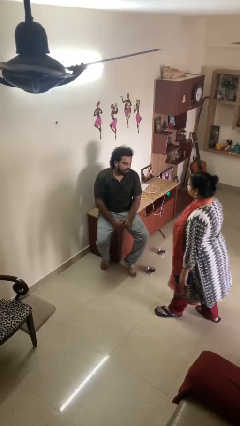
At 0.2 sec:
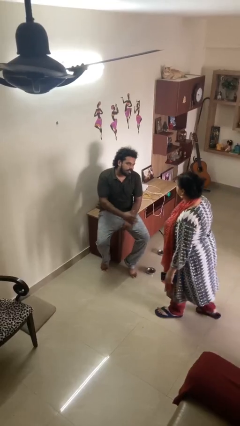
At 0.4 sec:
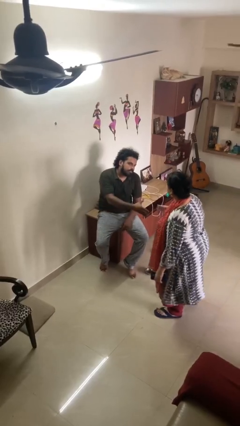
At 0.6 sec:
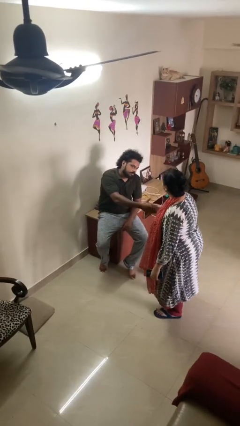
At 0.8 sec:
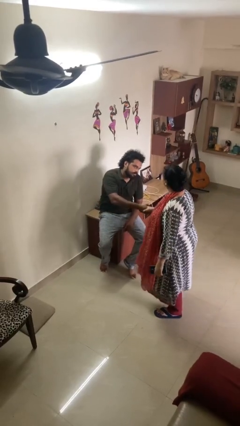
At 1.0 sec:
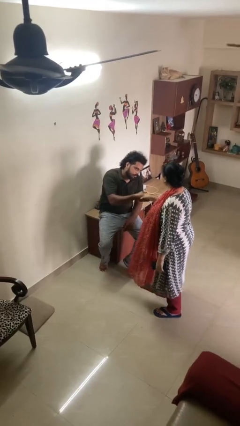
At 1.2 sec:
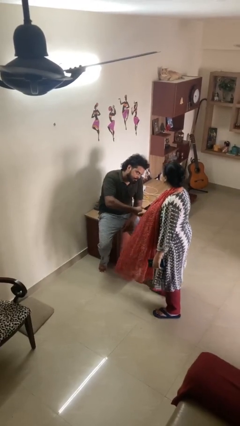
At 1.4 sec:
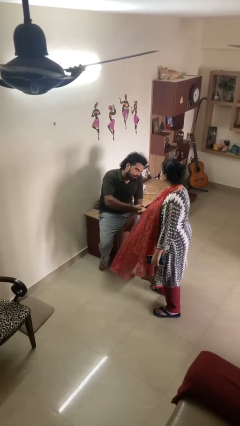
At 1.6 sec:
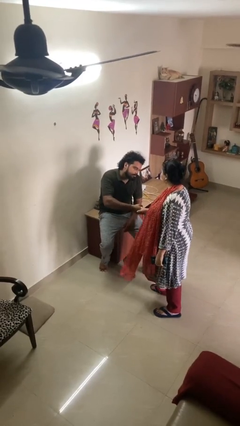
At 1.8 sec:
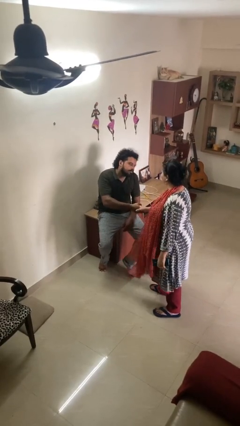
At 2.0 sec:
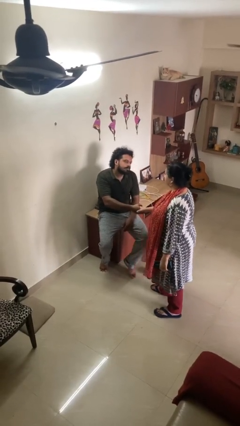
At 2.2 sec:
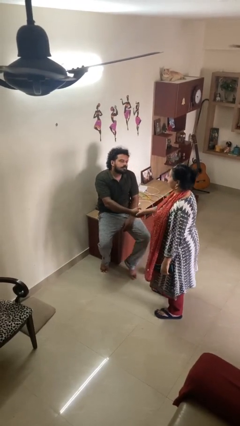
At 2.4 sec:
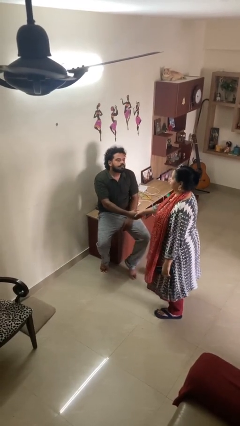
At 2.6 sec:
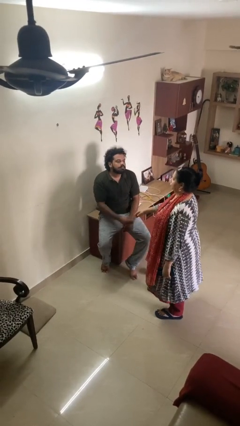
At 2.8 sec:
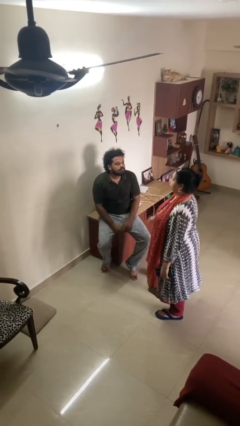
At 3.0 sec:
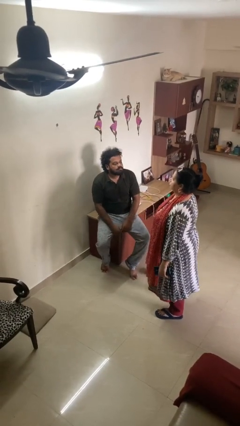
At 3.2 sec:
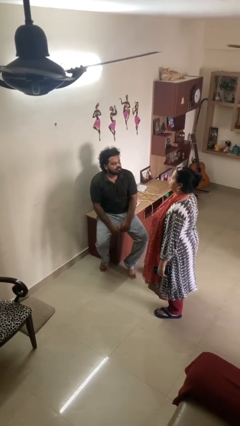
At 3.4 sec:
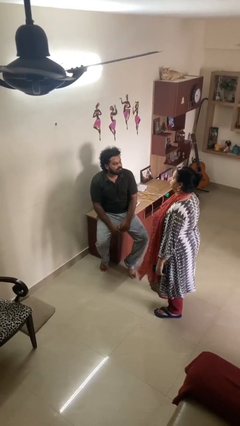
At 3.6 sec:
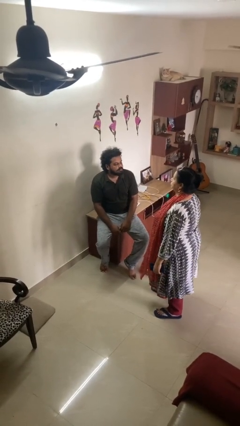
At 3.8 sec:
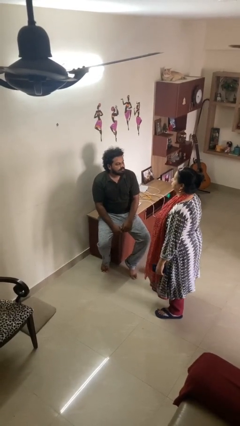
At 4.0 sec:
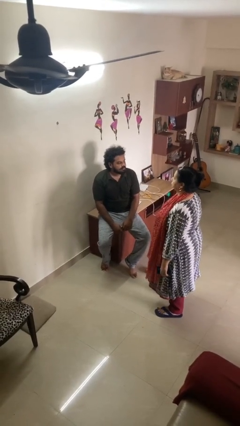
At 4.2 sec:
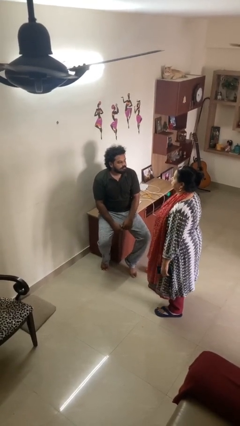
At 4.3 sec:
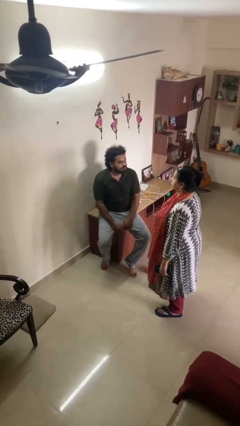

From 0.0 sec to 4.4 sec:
person shakes hand

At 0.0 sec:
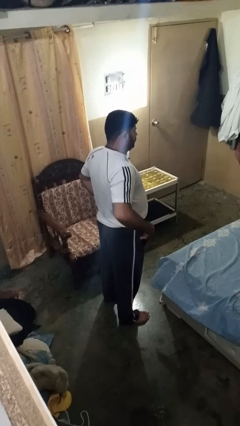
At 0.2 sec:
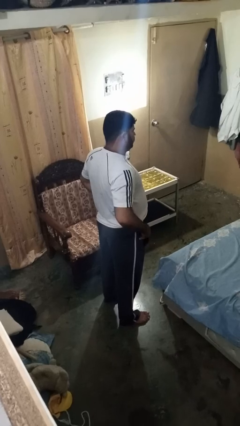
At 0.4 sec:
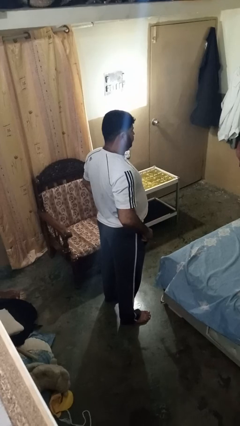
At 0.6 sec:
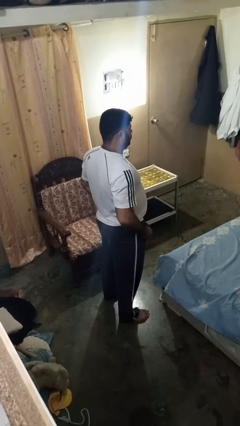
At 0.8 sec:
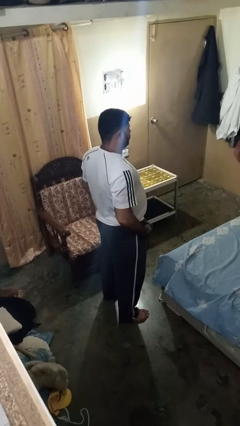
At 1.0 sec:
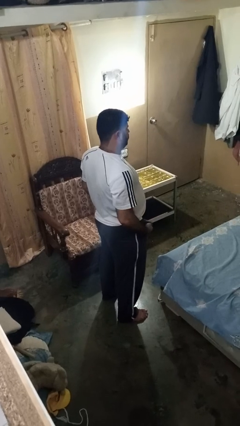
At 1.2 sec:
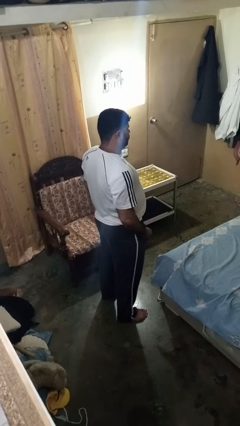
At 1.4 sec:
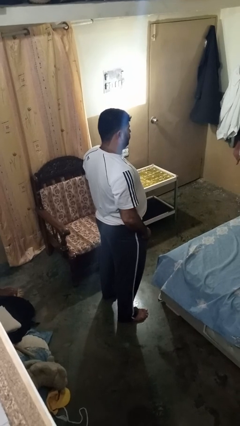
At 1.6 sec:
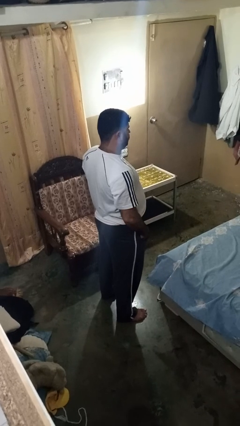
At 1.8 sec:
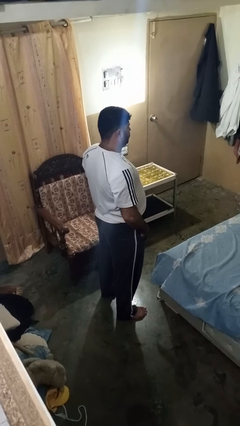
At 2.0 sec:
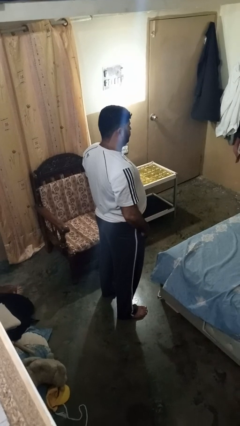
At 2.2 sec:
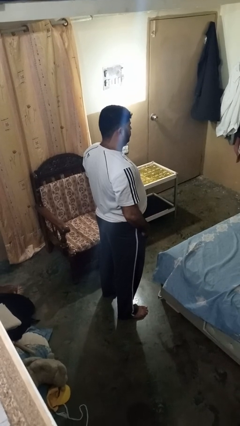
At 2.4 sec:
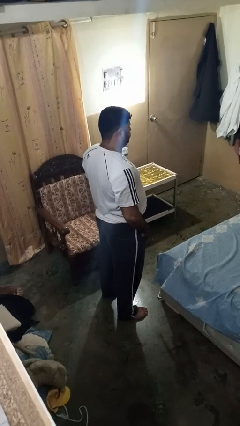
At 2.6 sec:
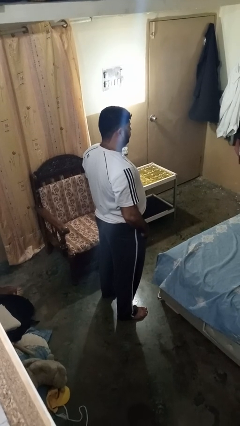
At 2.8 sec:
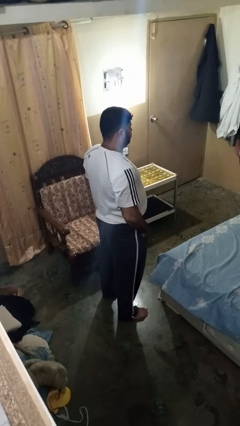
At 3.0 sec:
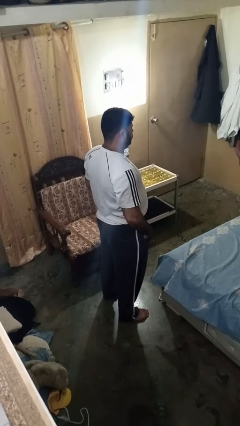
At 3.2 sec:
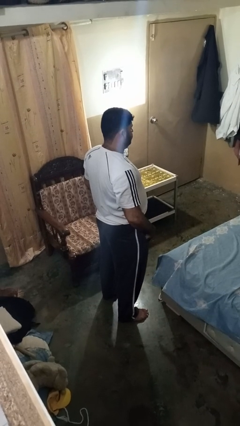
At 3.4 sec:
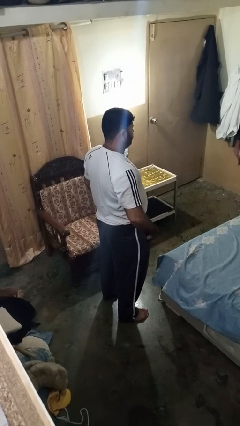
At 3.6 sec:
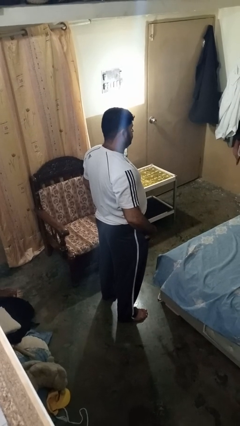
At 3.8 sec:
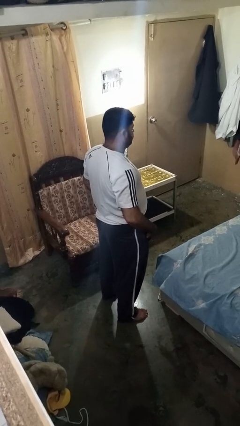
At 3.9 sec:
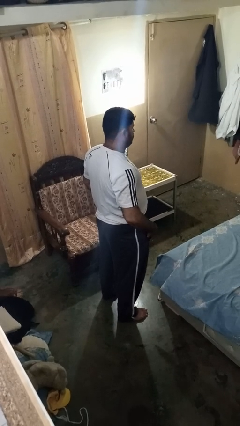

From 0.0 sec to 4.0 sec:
person puts hands in back pockets

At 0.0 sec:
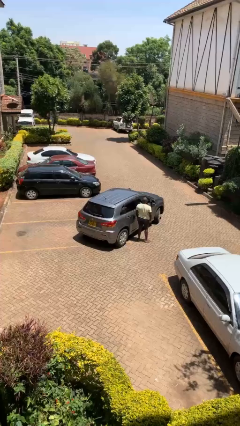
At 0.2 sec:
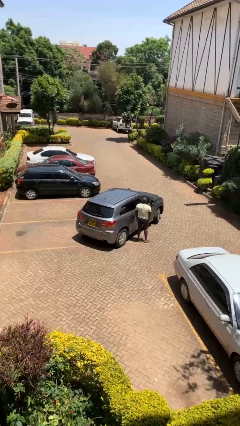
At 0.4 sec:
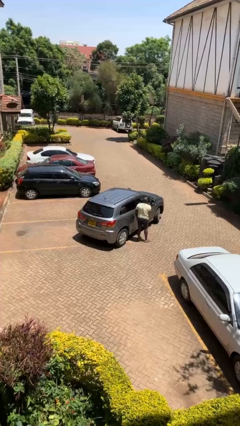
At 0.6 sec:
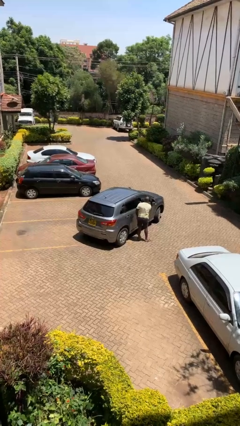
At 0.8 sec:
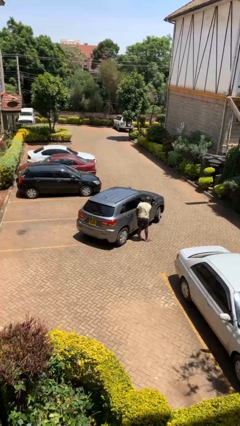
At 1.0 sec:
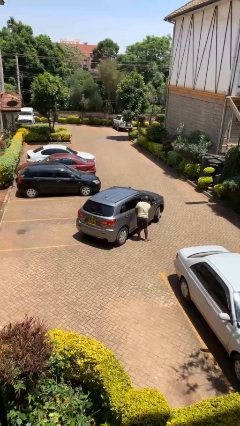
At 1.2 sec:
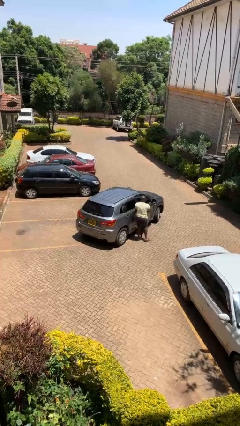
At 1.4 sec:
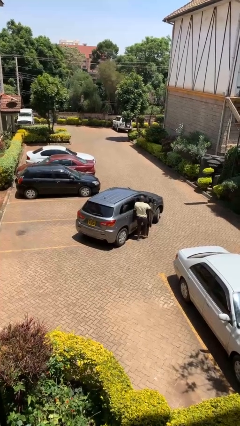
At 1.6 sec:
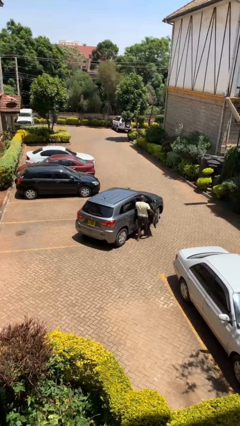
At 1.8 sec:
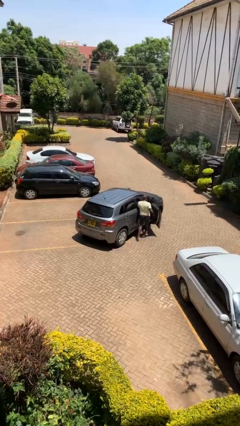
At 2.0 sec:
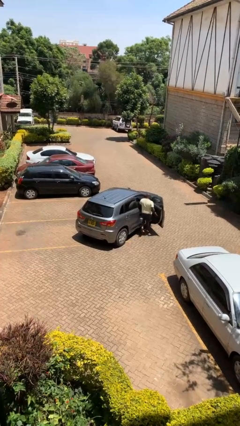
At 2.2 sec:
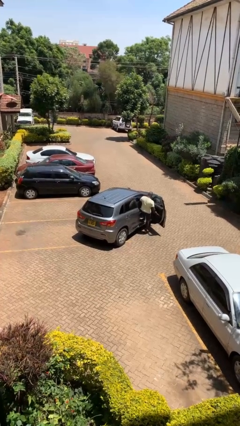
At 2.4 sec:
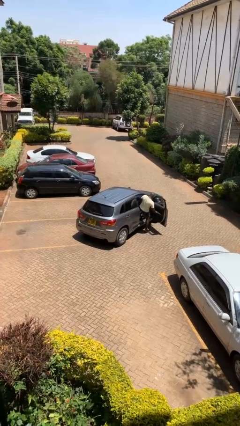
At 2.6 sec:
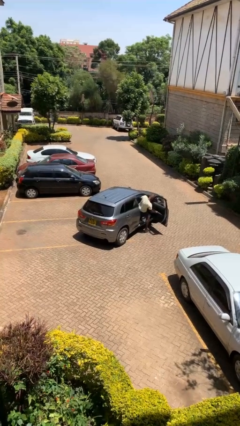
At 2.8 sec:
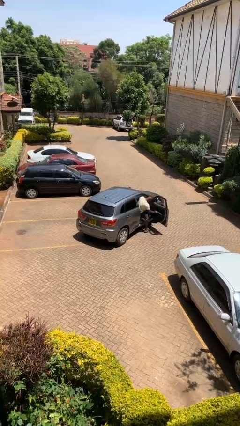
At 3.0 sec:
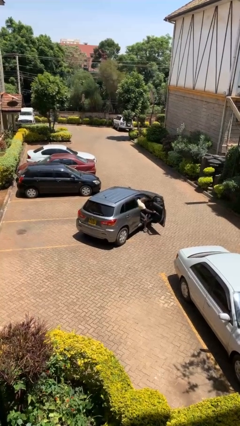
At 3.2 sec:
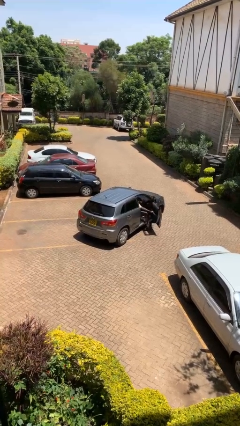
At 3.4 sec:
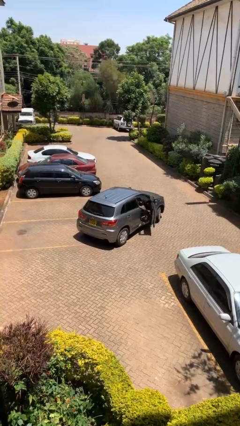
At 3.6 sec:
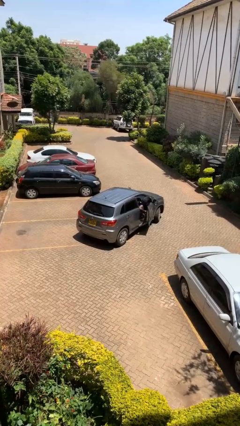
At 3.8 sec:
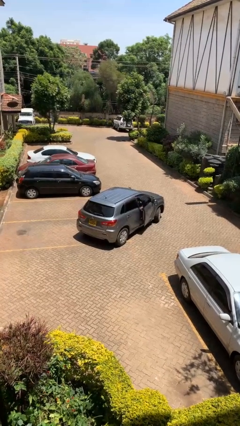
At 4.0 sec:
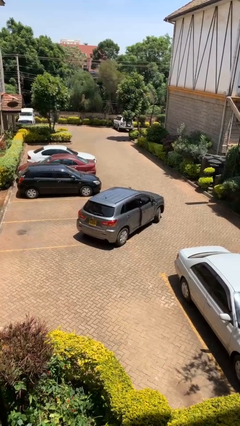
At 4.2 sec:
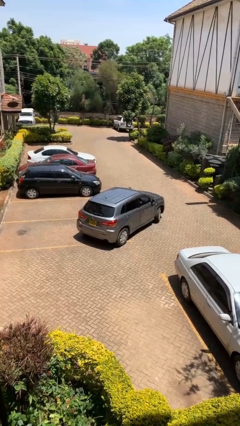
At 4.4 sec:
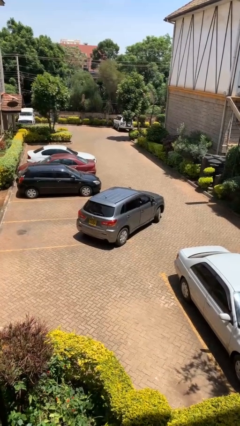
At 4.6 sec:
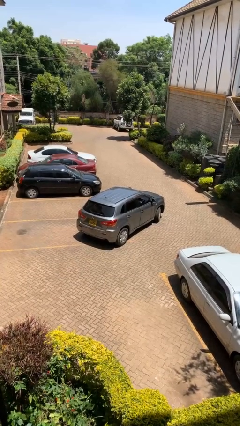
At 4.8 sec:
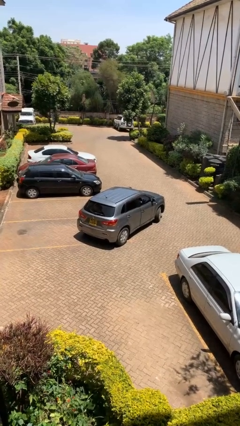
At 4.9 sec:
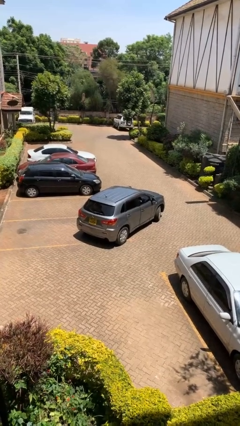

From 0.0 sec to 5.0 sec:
car picks up person

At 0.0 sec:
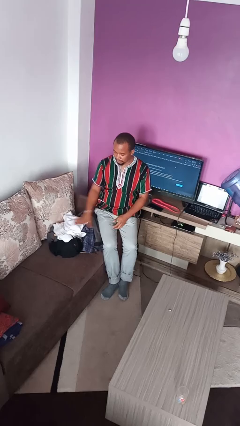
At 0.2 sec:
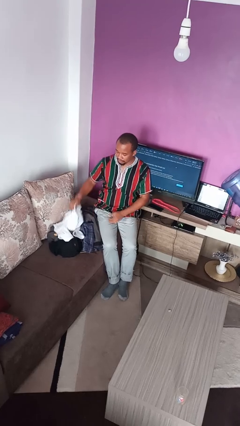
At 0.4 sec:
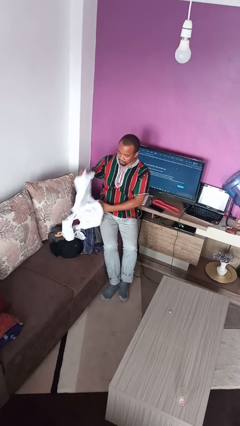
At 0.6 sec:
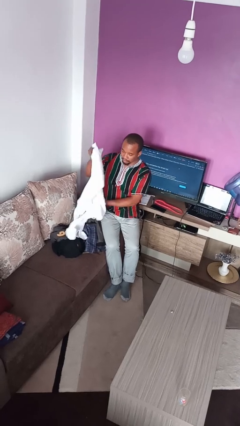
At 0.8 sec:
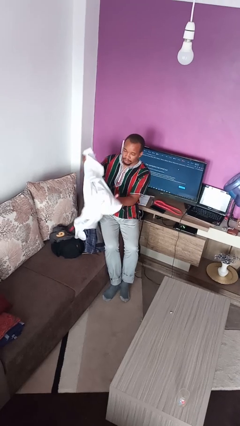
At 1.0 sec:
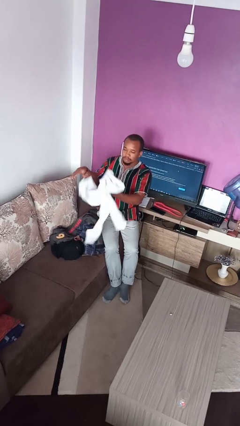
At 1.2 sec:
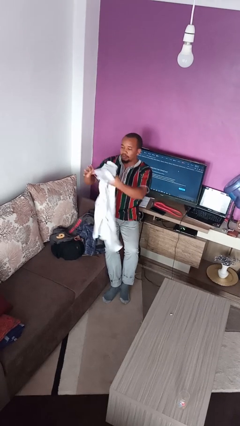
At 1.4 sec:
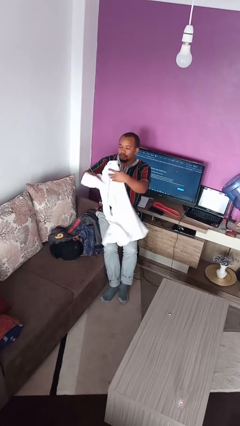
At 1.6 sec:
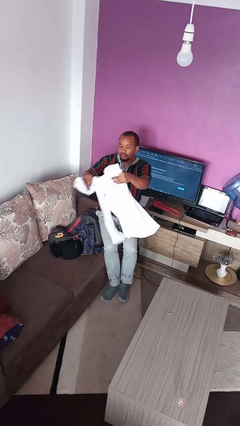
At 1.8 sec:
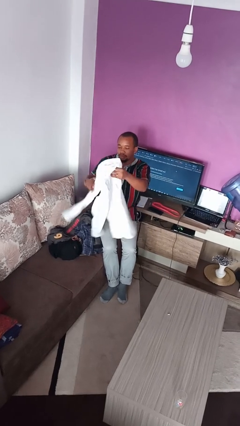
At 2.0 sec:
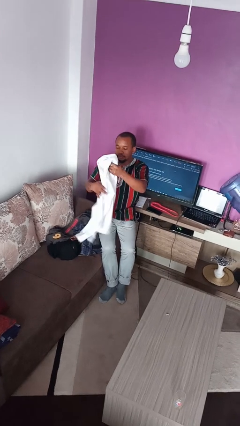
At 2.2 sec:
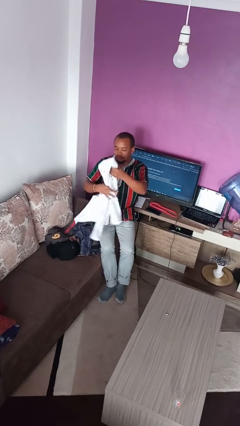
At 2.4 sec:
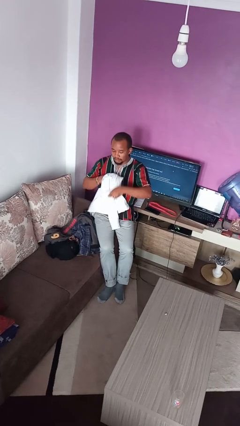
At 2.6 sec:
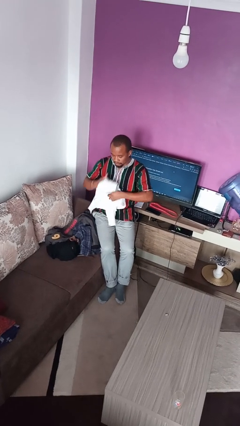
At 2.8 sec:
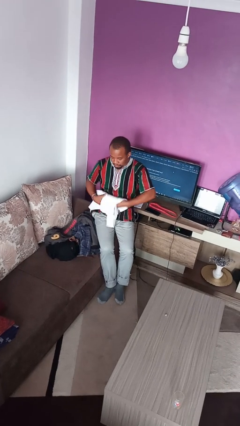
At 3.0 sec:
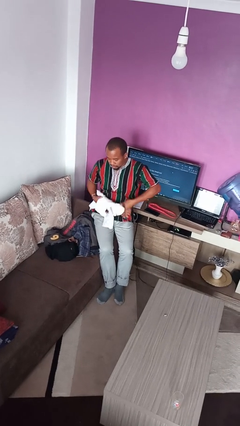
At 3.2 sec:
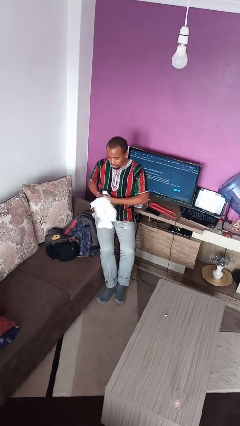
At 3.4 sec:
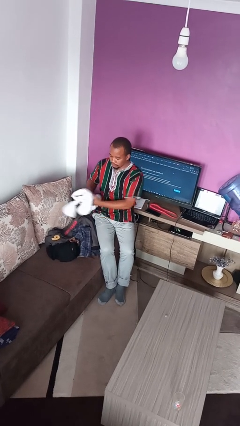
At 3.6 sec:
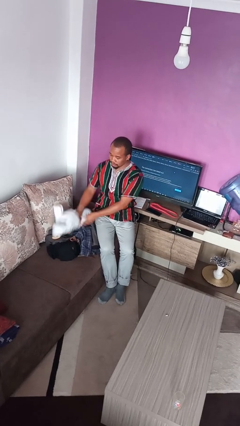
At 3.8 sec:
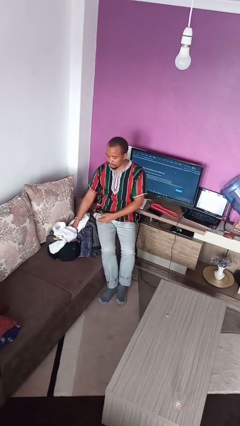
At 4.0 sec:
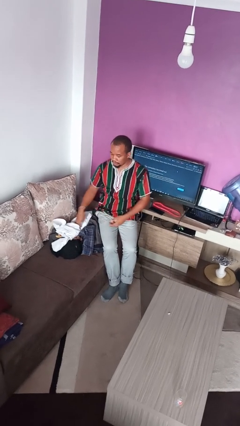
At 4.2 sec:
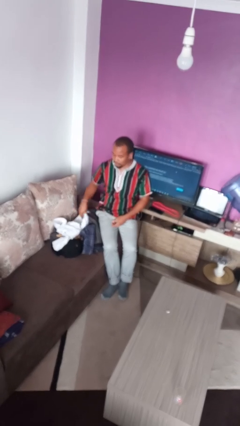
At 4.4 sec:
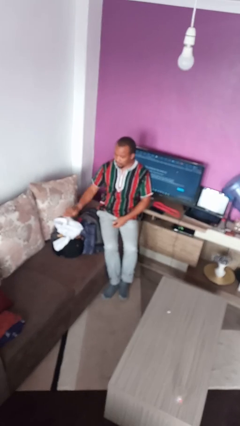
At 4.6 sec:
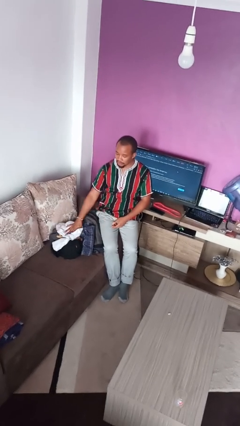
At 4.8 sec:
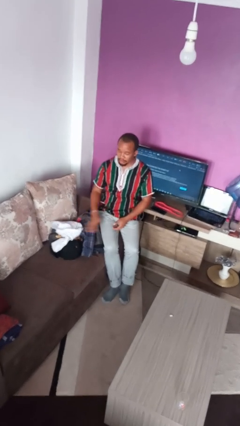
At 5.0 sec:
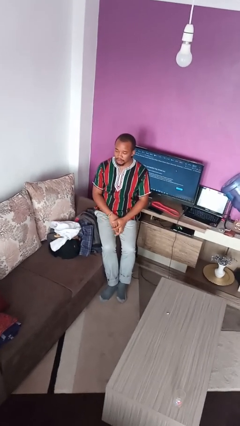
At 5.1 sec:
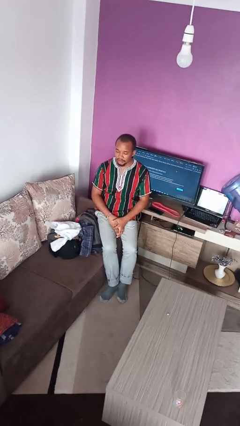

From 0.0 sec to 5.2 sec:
person folds shirt
